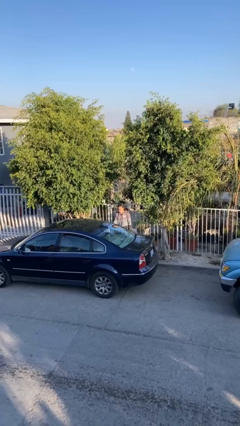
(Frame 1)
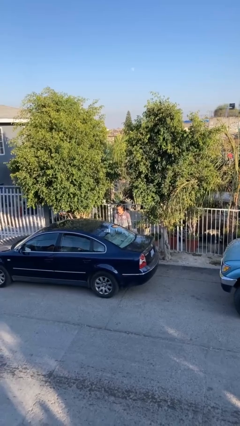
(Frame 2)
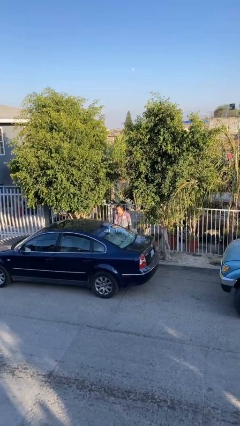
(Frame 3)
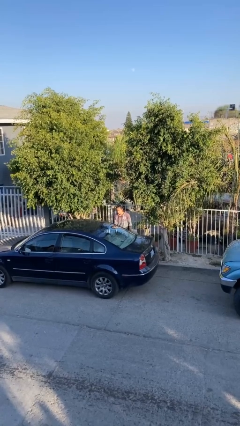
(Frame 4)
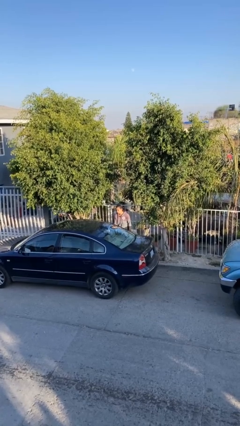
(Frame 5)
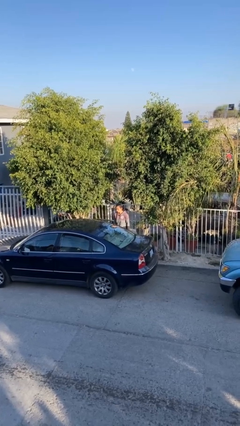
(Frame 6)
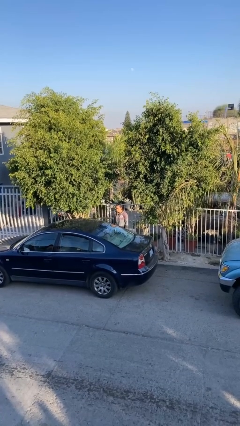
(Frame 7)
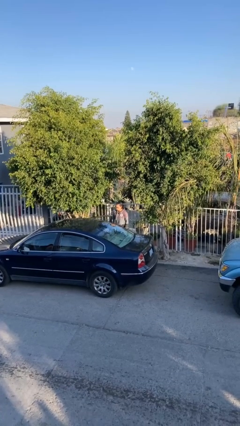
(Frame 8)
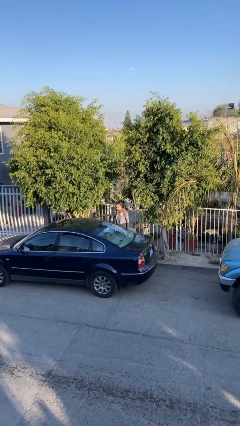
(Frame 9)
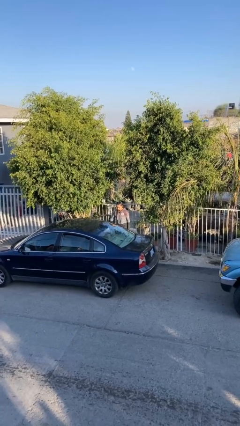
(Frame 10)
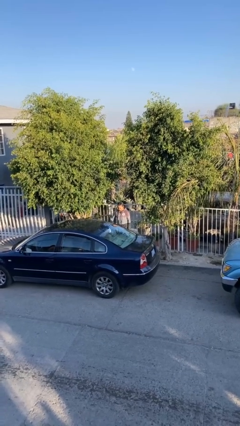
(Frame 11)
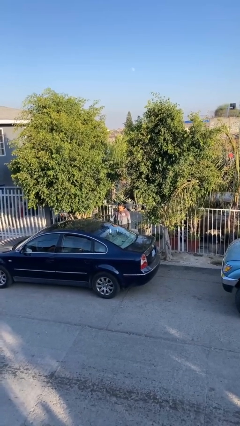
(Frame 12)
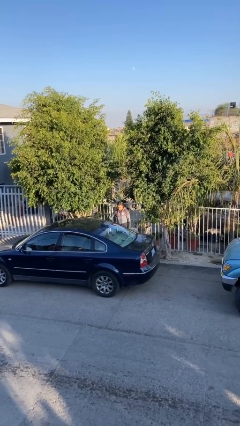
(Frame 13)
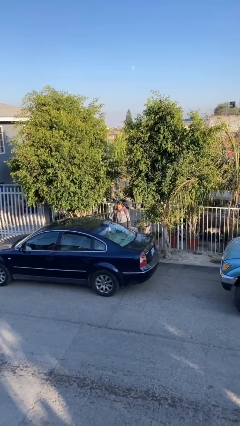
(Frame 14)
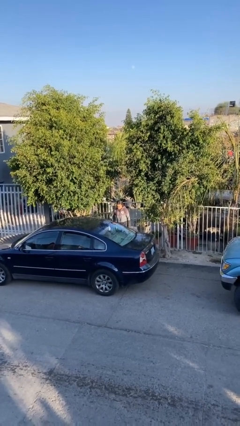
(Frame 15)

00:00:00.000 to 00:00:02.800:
person opens car door

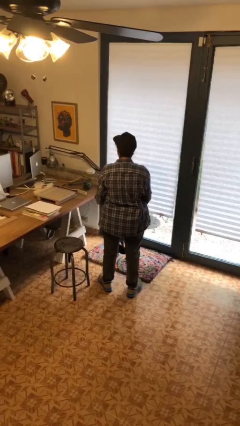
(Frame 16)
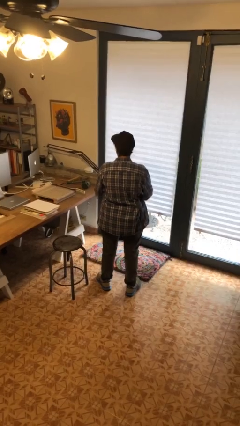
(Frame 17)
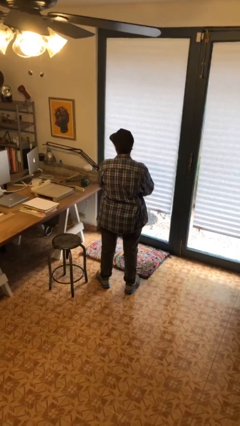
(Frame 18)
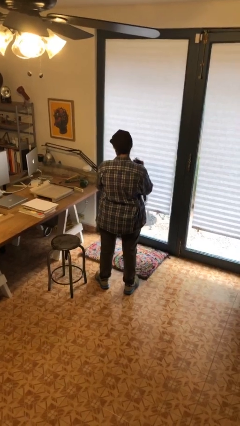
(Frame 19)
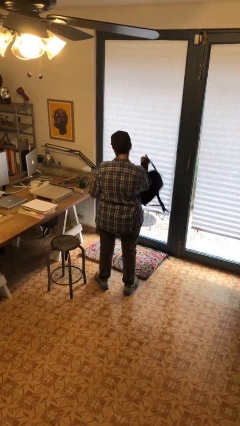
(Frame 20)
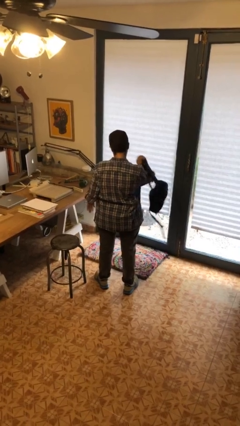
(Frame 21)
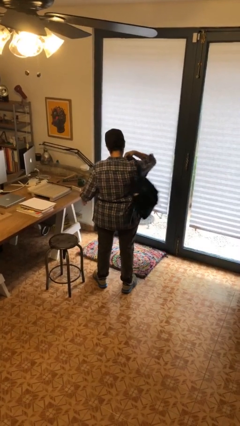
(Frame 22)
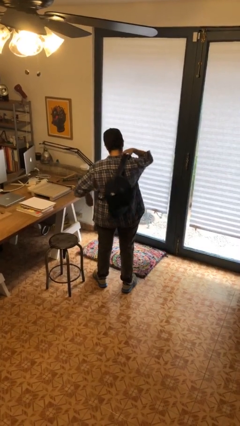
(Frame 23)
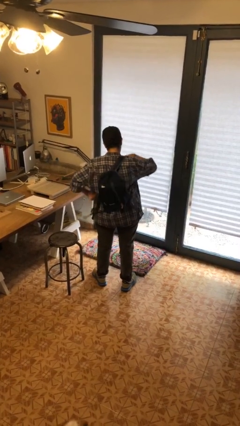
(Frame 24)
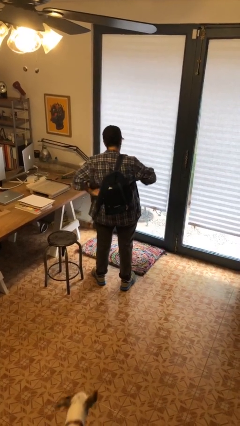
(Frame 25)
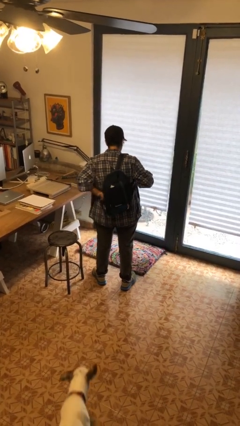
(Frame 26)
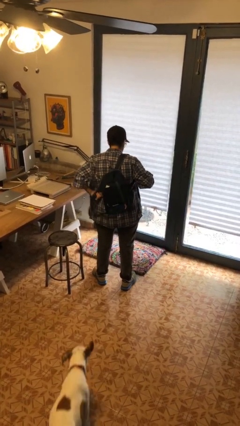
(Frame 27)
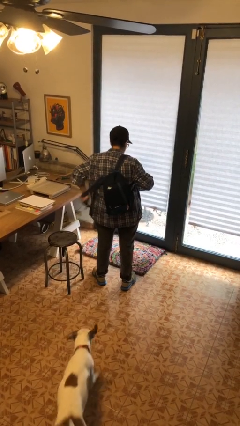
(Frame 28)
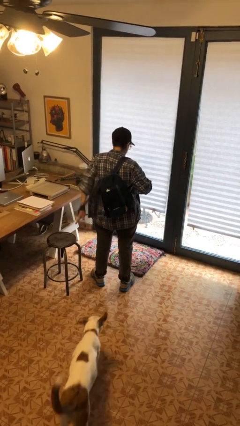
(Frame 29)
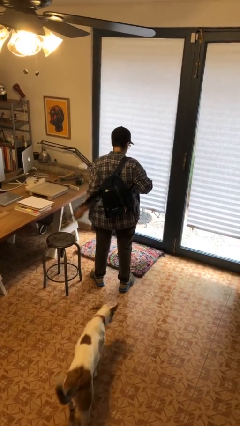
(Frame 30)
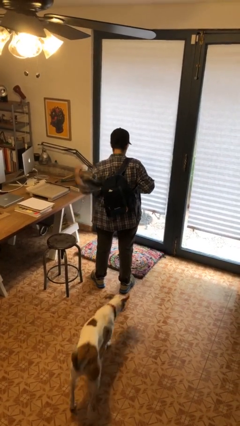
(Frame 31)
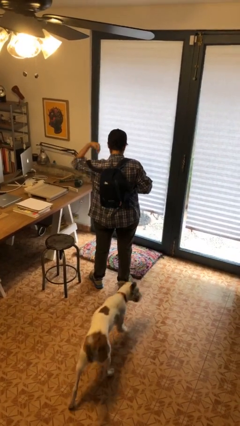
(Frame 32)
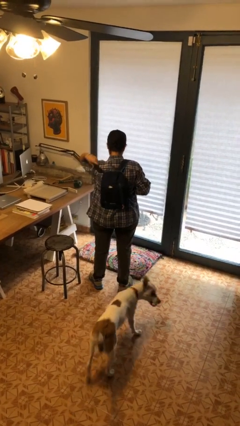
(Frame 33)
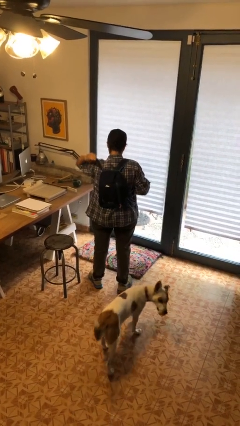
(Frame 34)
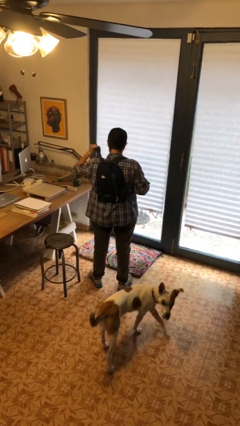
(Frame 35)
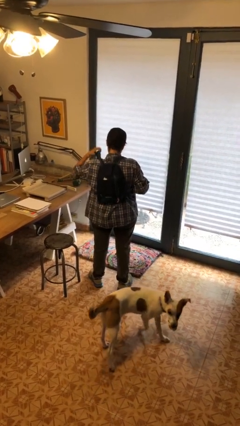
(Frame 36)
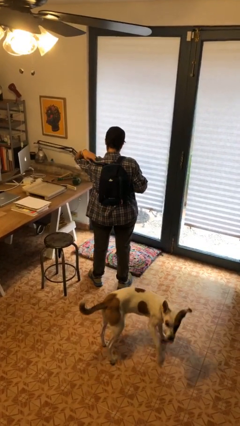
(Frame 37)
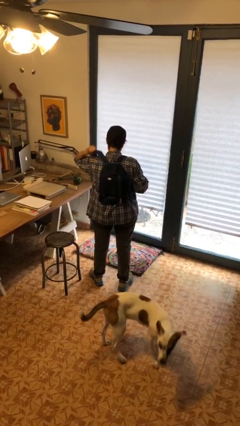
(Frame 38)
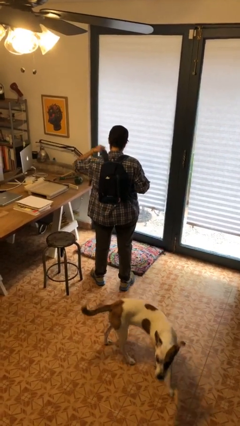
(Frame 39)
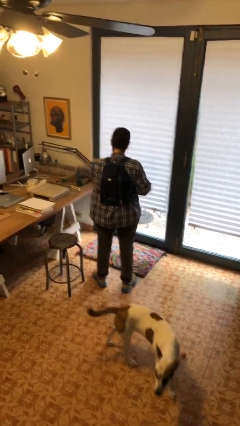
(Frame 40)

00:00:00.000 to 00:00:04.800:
person puts on backpack

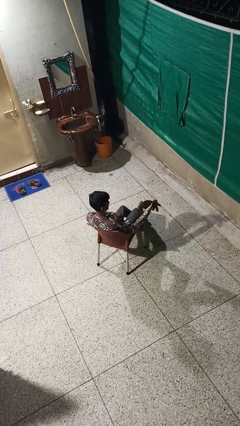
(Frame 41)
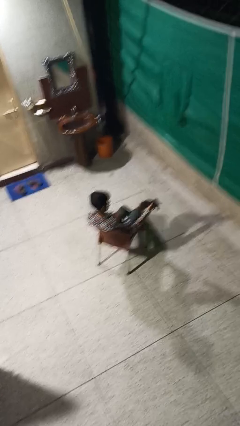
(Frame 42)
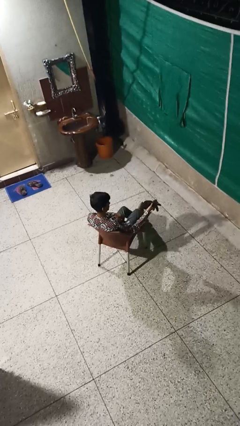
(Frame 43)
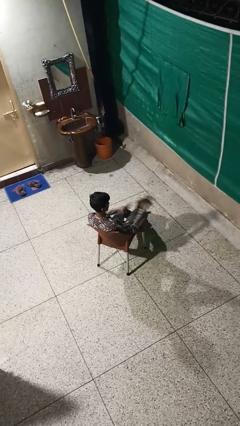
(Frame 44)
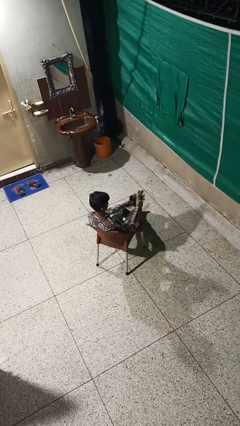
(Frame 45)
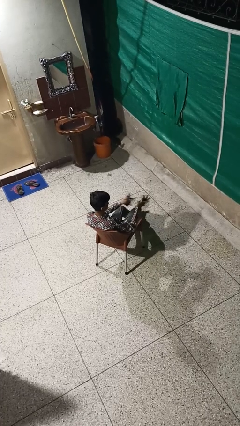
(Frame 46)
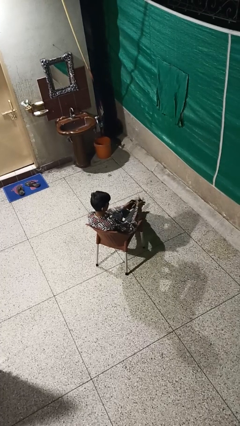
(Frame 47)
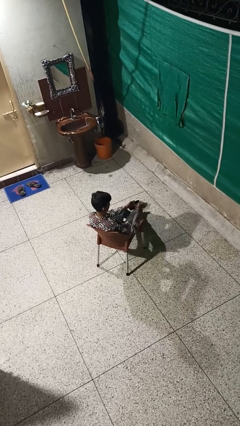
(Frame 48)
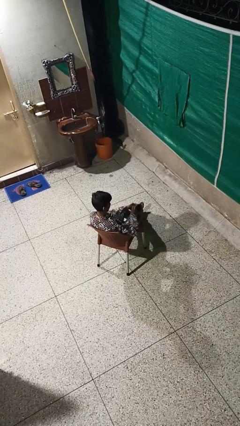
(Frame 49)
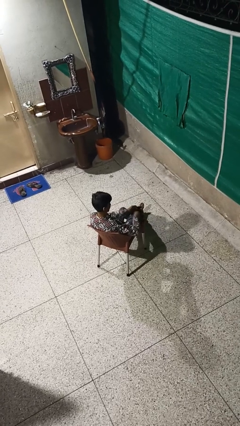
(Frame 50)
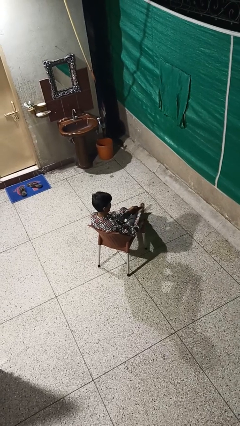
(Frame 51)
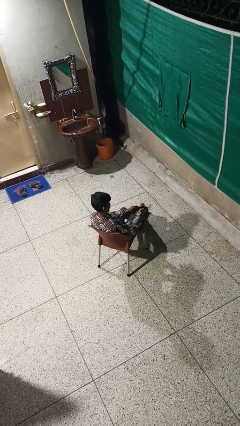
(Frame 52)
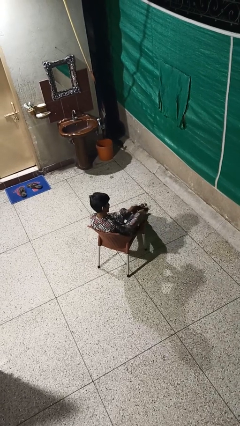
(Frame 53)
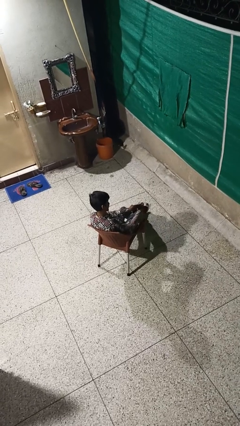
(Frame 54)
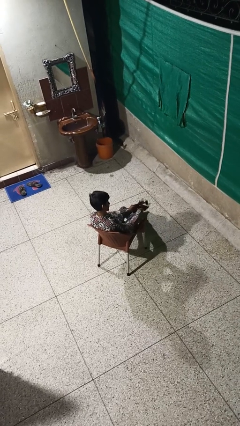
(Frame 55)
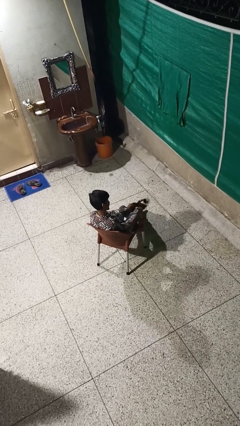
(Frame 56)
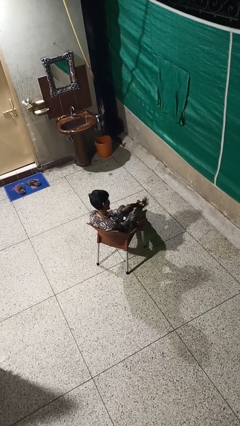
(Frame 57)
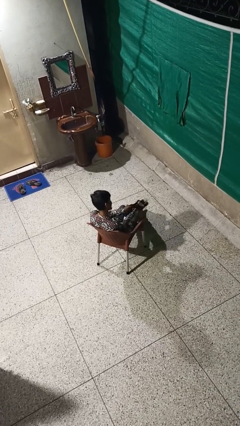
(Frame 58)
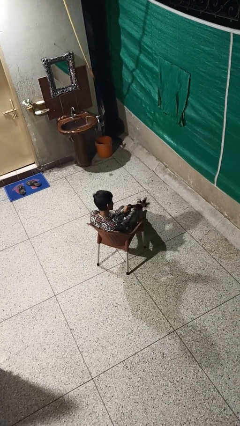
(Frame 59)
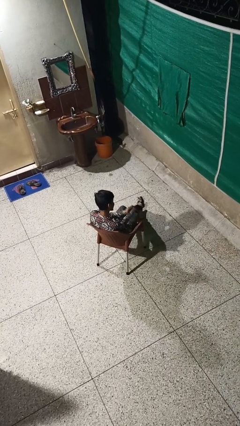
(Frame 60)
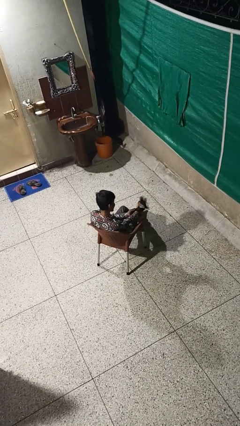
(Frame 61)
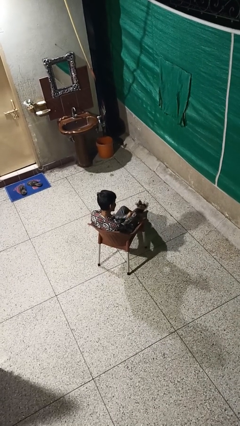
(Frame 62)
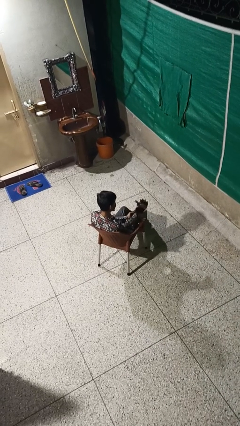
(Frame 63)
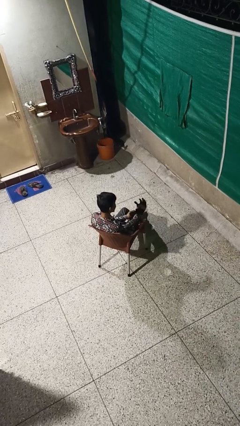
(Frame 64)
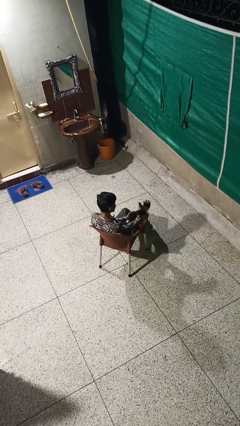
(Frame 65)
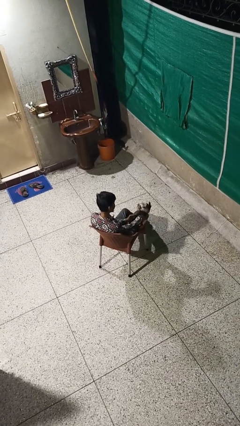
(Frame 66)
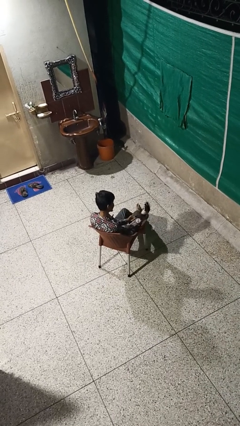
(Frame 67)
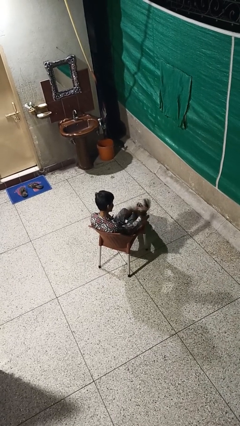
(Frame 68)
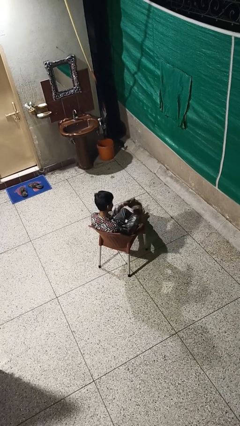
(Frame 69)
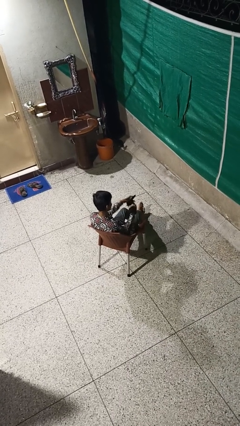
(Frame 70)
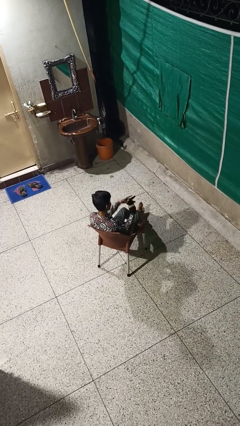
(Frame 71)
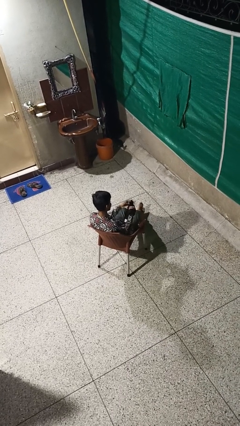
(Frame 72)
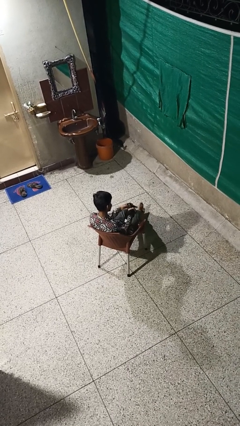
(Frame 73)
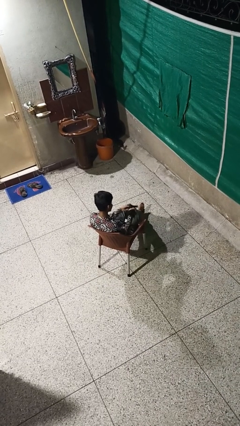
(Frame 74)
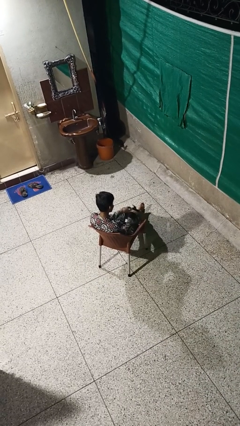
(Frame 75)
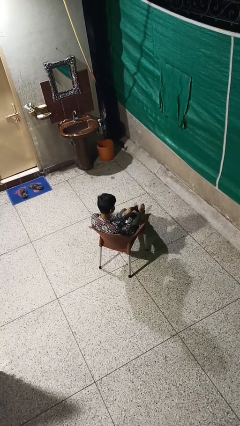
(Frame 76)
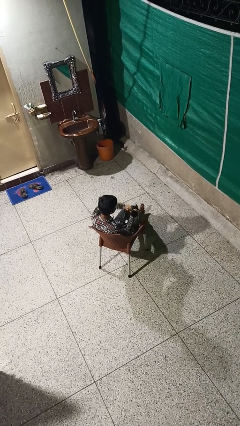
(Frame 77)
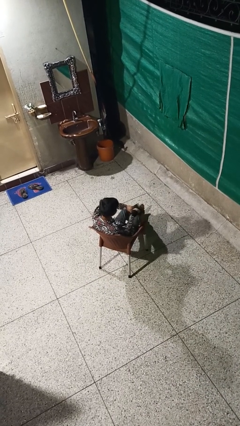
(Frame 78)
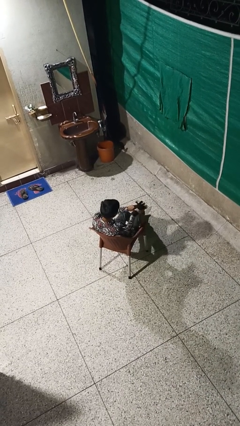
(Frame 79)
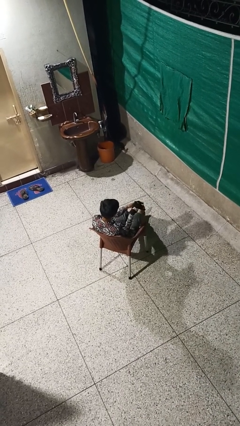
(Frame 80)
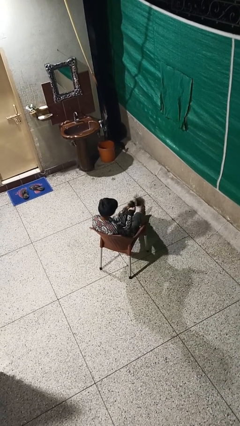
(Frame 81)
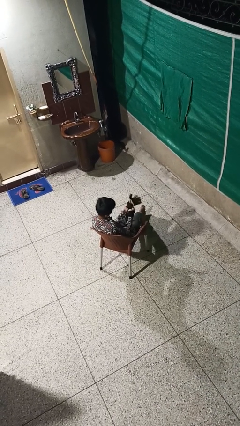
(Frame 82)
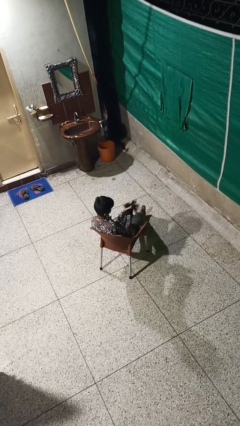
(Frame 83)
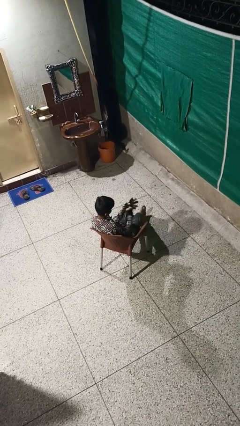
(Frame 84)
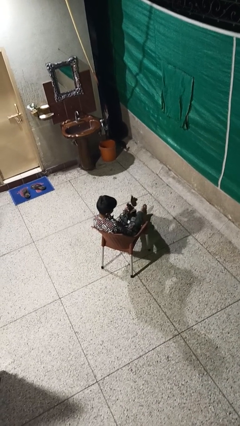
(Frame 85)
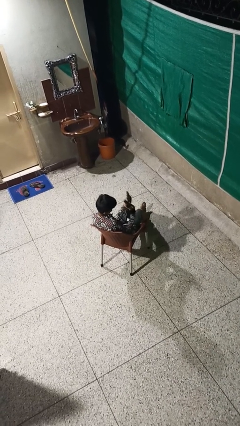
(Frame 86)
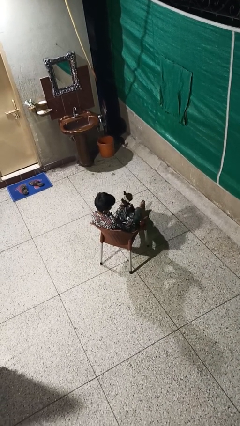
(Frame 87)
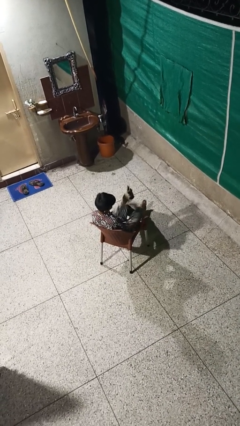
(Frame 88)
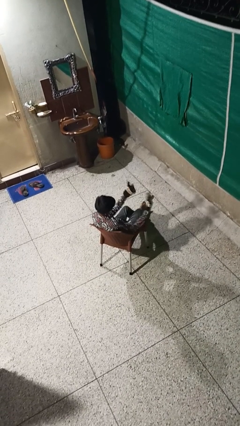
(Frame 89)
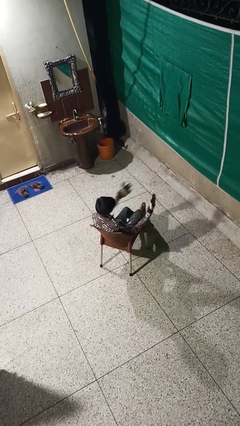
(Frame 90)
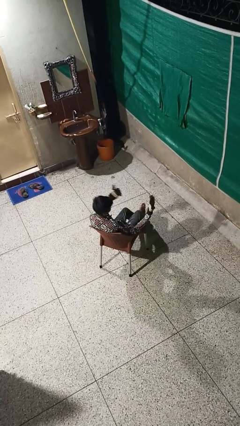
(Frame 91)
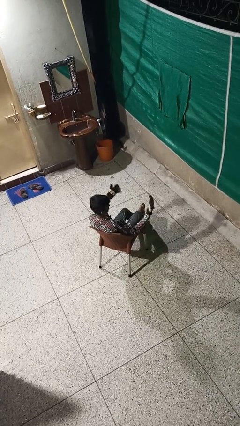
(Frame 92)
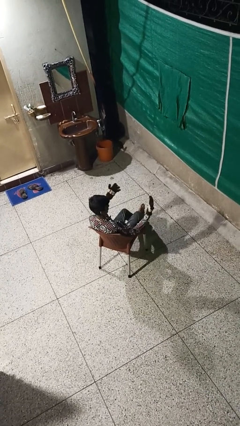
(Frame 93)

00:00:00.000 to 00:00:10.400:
person puts on gloves
